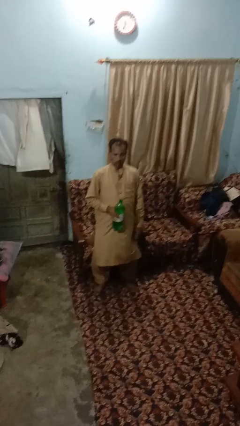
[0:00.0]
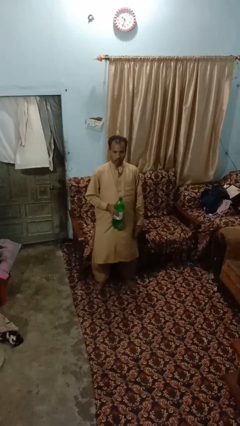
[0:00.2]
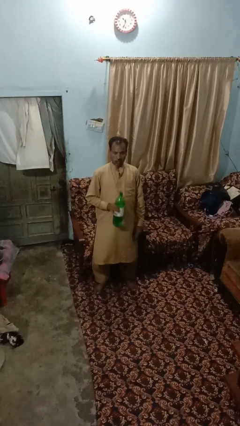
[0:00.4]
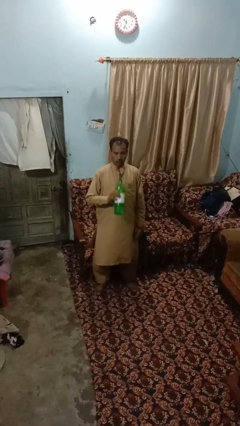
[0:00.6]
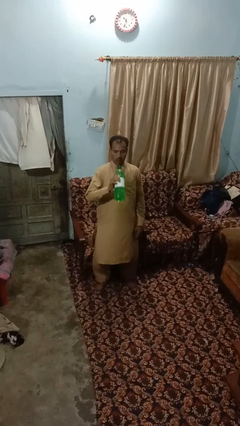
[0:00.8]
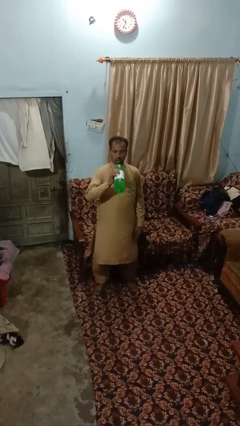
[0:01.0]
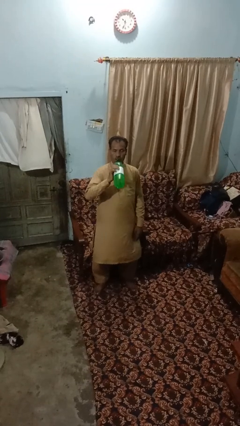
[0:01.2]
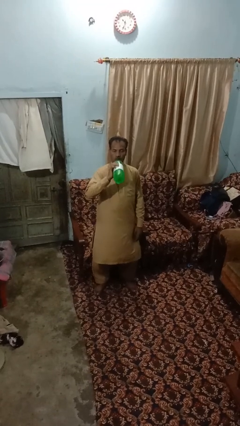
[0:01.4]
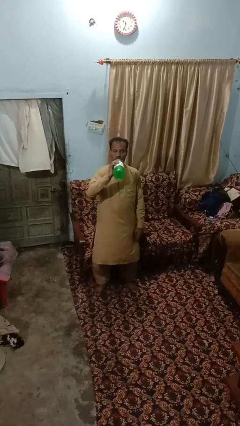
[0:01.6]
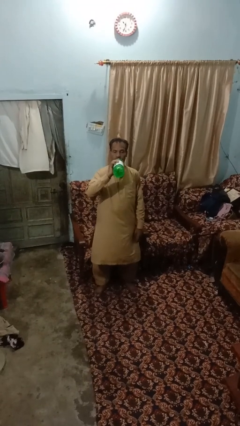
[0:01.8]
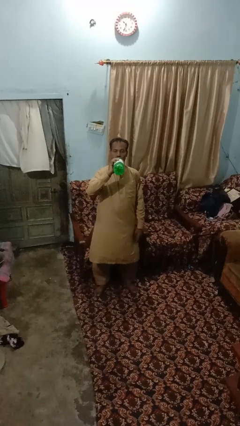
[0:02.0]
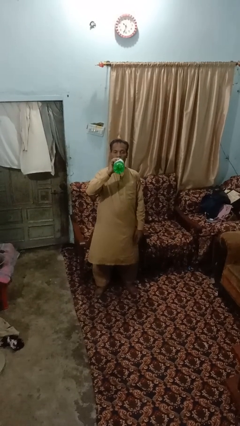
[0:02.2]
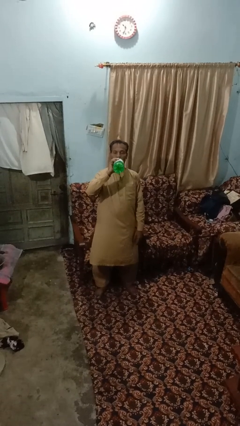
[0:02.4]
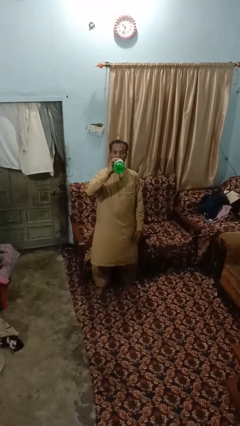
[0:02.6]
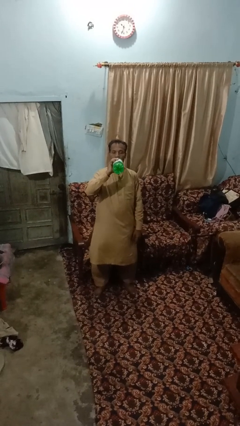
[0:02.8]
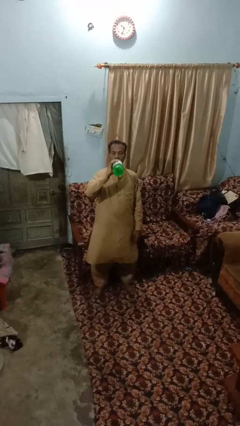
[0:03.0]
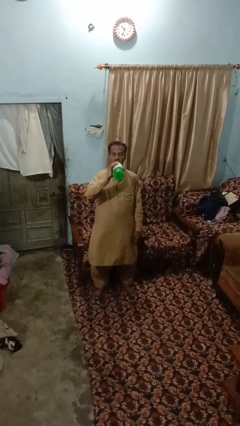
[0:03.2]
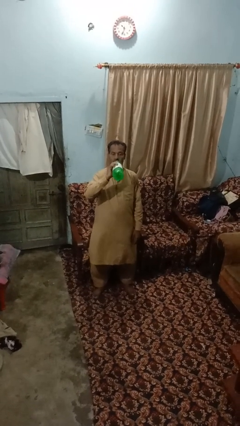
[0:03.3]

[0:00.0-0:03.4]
person drinks from bottle

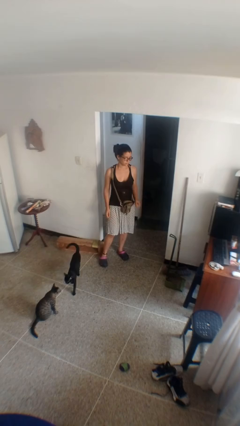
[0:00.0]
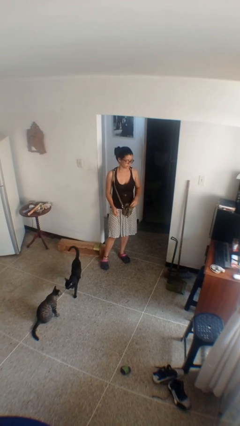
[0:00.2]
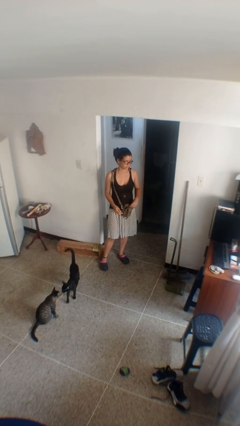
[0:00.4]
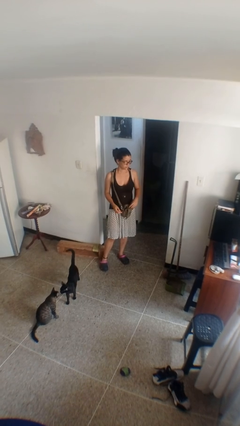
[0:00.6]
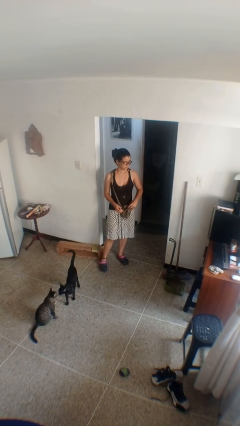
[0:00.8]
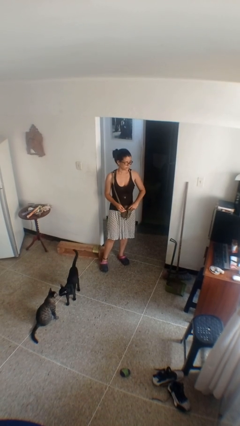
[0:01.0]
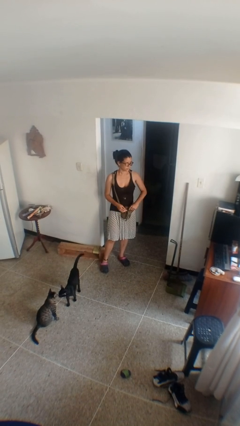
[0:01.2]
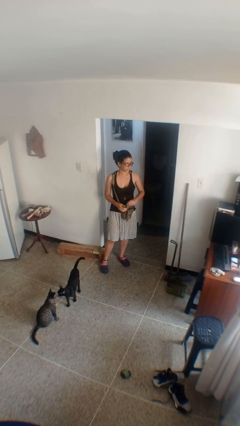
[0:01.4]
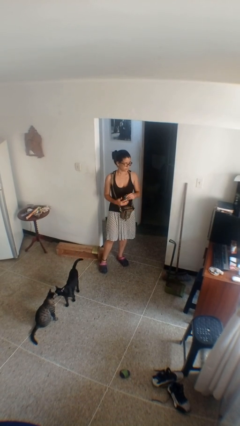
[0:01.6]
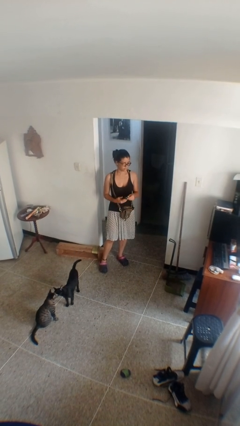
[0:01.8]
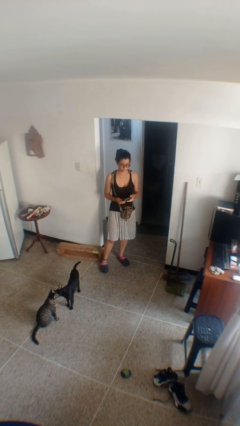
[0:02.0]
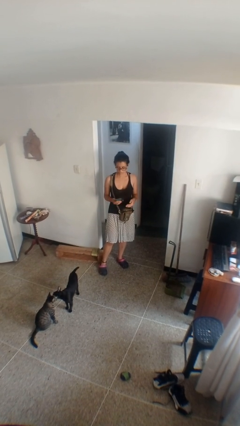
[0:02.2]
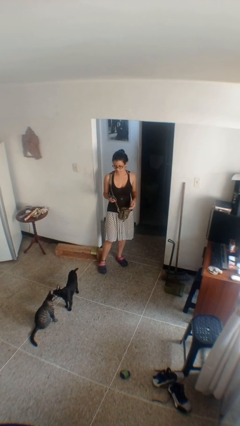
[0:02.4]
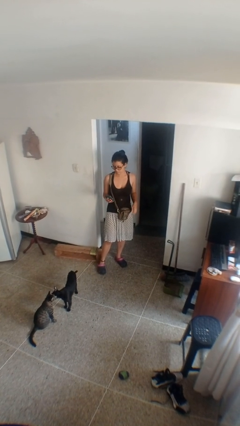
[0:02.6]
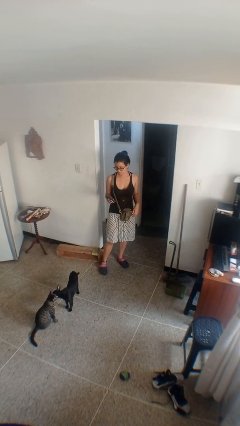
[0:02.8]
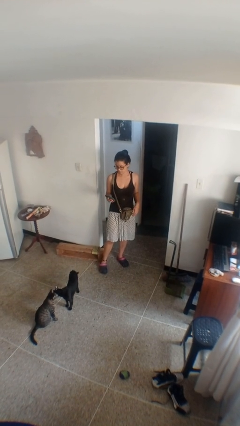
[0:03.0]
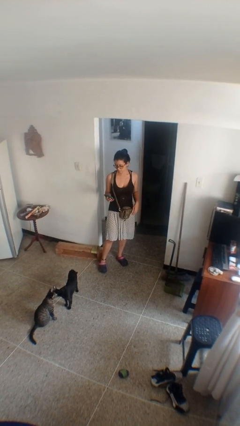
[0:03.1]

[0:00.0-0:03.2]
person takes phone from pocket

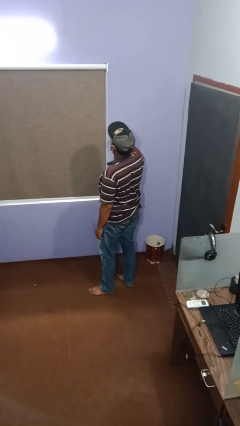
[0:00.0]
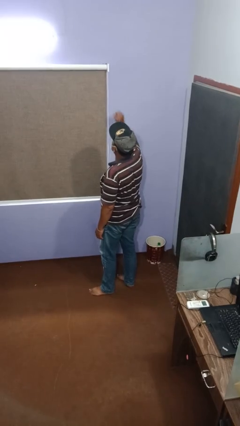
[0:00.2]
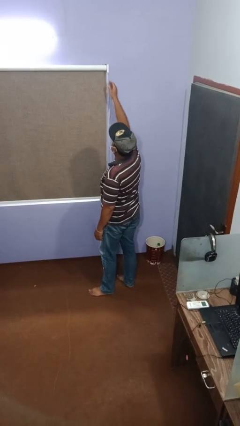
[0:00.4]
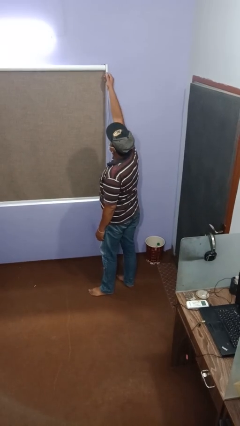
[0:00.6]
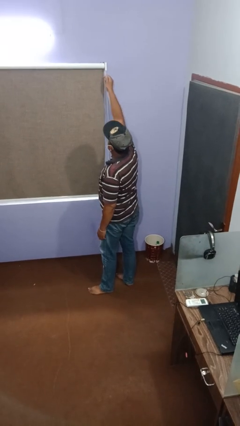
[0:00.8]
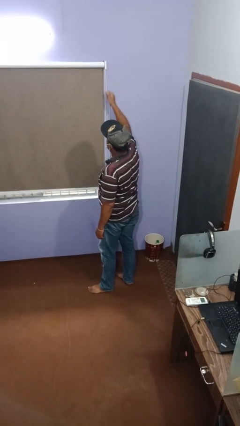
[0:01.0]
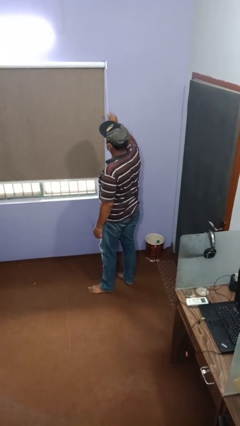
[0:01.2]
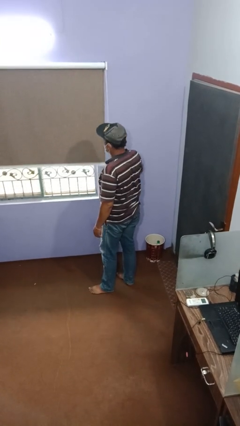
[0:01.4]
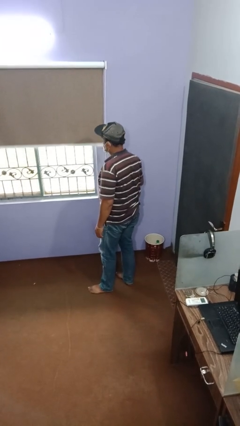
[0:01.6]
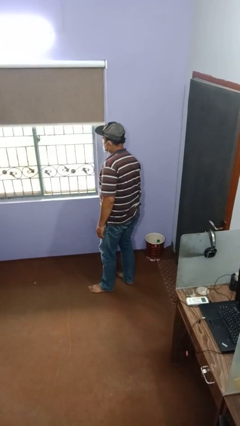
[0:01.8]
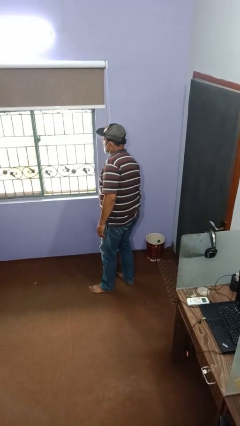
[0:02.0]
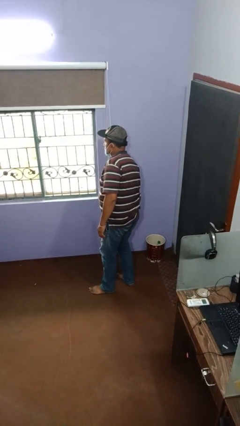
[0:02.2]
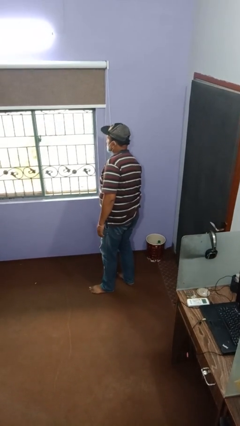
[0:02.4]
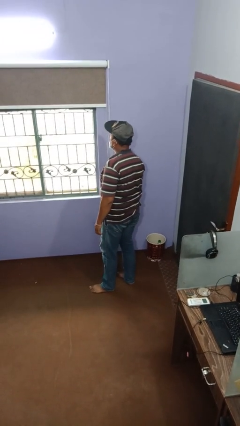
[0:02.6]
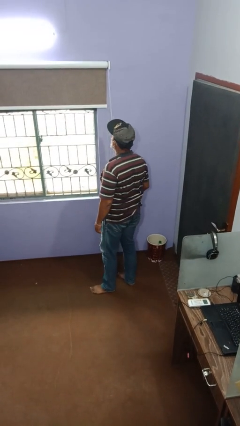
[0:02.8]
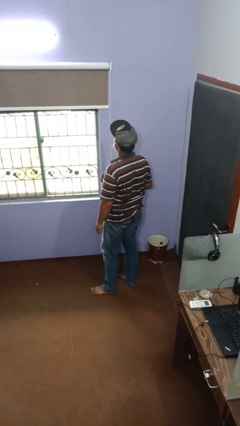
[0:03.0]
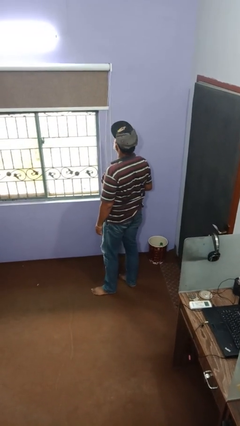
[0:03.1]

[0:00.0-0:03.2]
person opens curtains

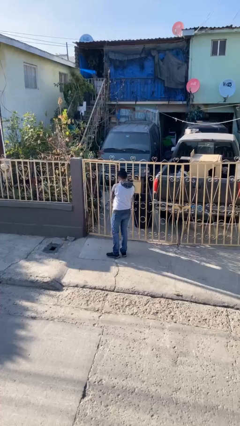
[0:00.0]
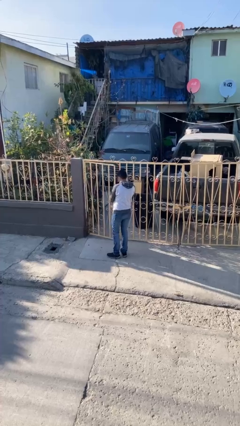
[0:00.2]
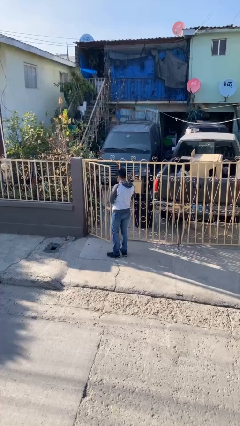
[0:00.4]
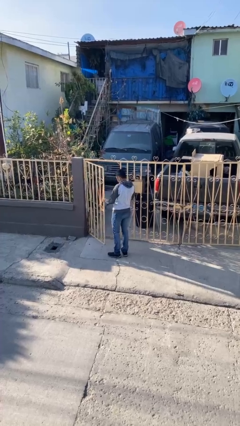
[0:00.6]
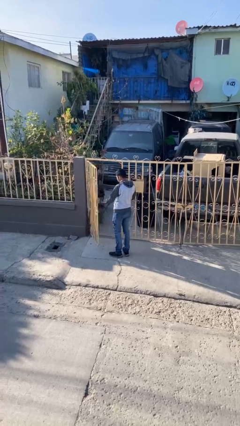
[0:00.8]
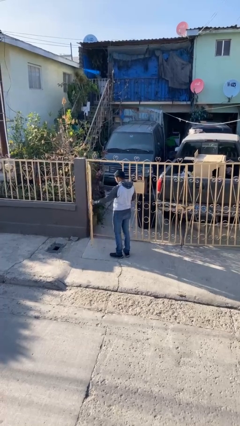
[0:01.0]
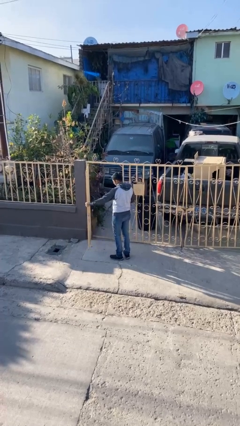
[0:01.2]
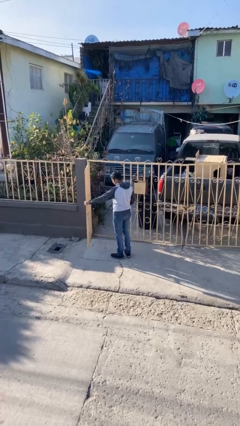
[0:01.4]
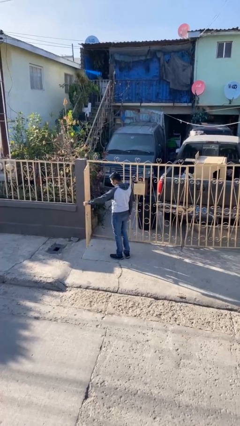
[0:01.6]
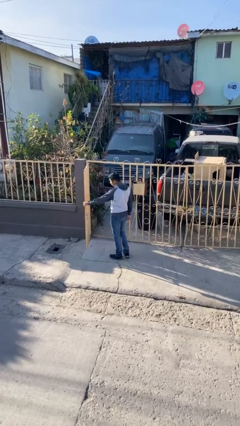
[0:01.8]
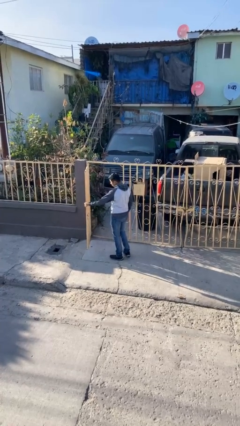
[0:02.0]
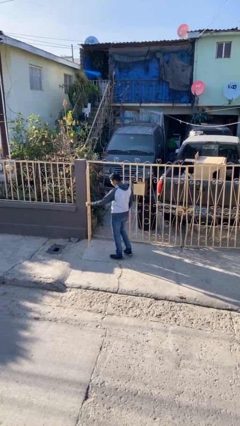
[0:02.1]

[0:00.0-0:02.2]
person opens facility door

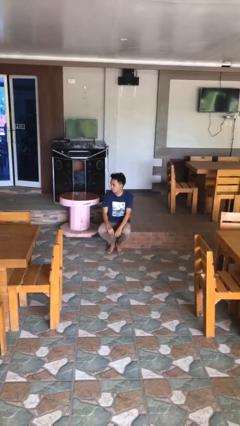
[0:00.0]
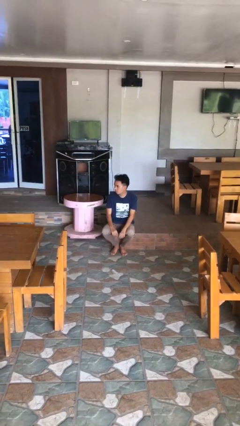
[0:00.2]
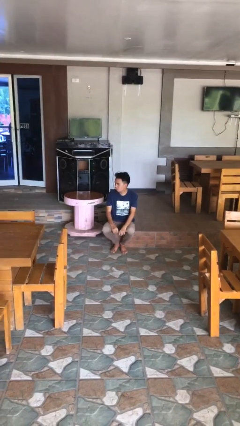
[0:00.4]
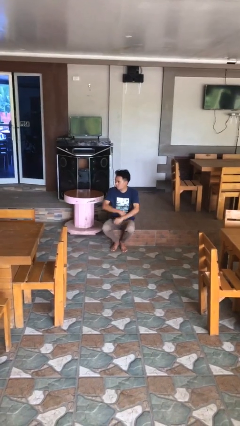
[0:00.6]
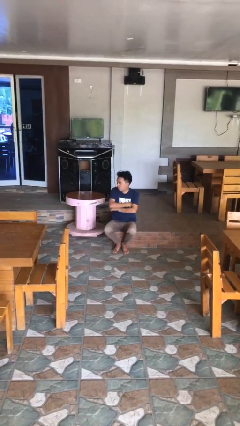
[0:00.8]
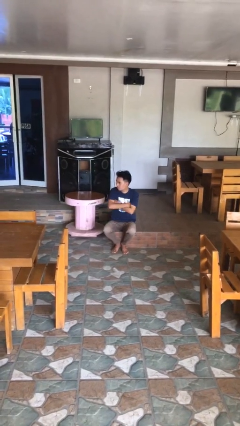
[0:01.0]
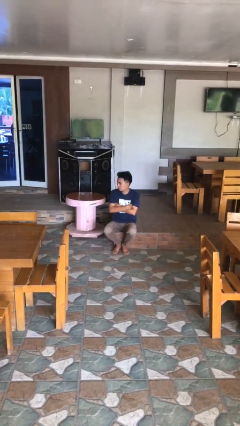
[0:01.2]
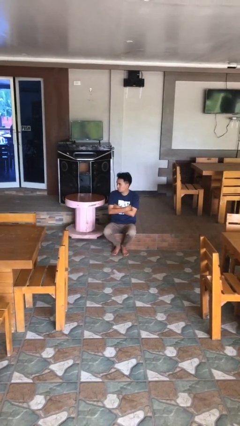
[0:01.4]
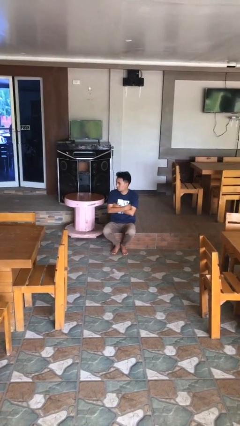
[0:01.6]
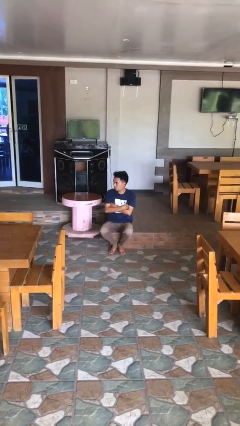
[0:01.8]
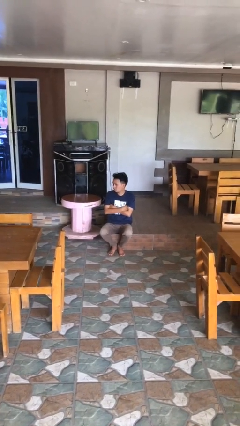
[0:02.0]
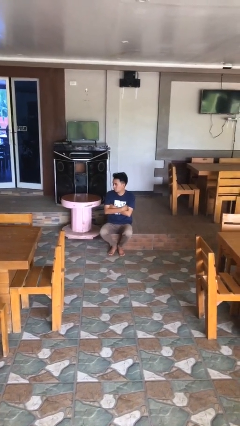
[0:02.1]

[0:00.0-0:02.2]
person crosses arms

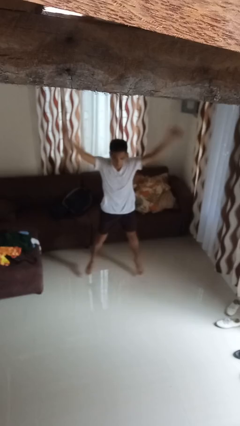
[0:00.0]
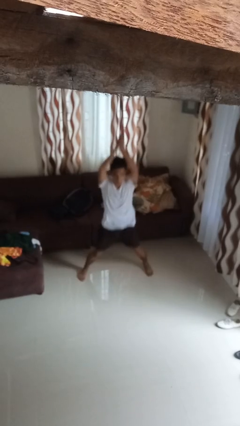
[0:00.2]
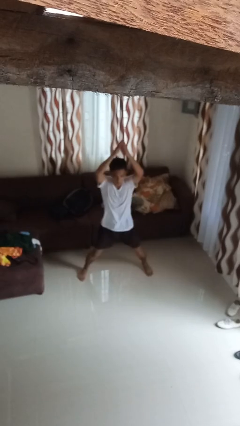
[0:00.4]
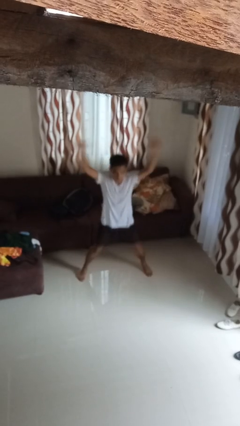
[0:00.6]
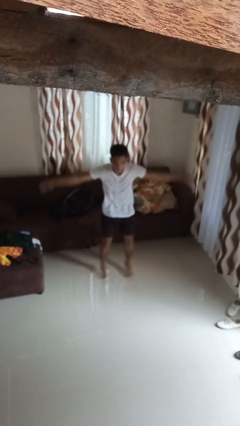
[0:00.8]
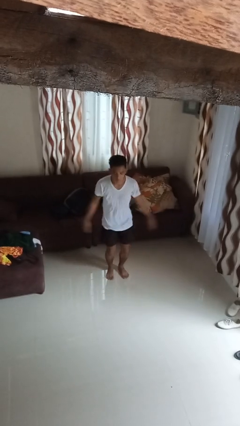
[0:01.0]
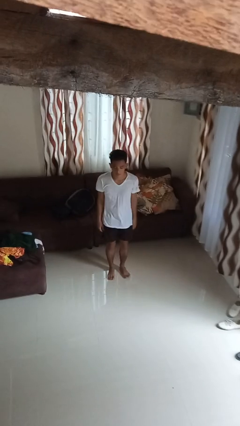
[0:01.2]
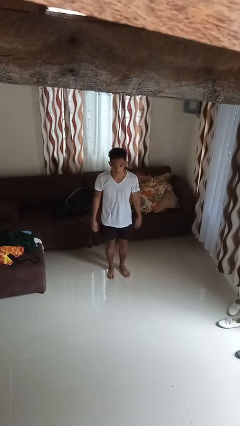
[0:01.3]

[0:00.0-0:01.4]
person exercises with jumping jacks

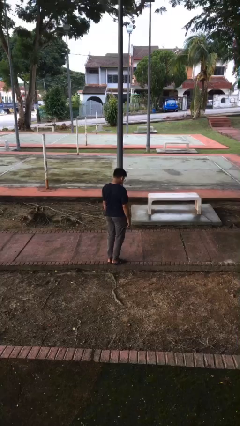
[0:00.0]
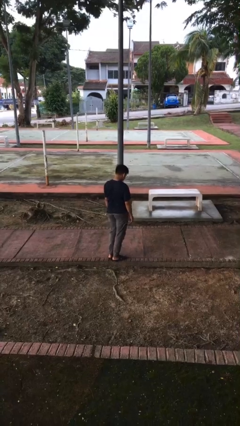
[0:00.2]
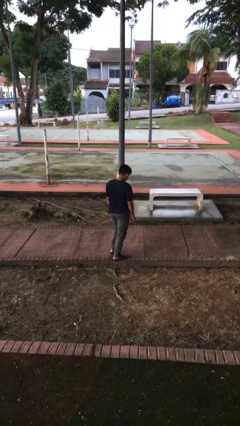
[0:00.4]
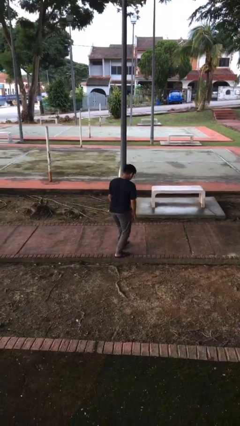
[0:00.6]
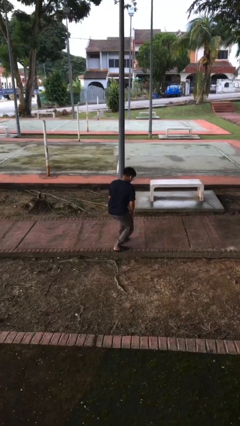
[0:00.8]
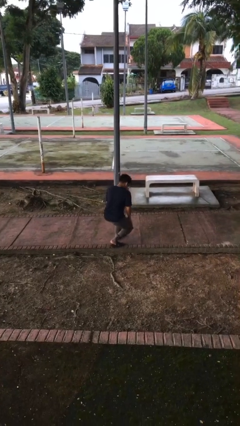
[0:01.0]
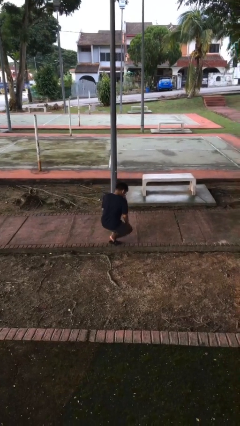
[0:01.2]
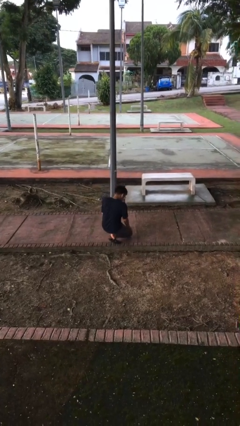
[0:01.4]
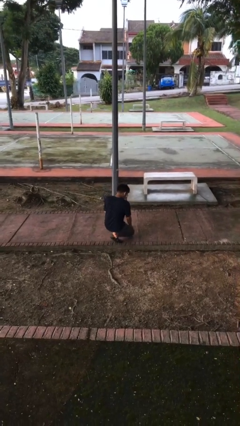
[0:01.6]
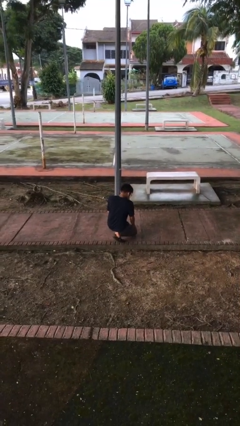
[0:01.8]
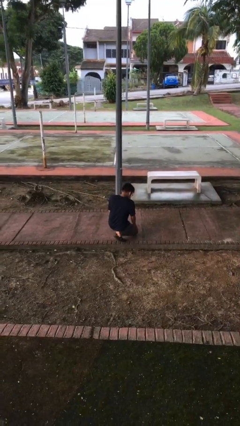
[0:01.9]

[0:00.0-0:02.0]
person kneels
